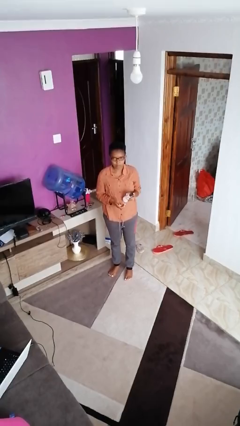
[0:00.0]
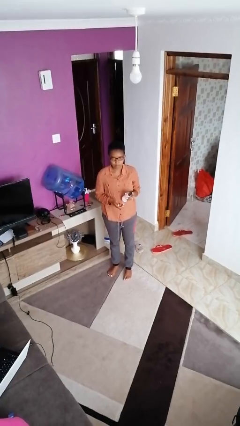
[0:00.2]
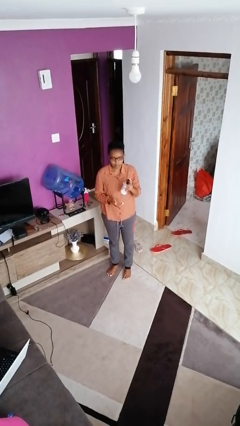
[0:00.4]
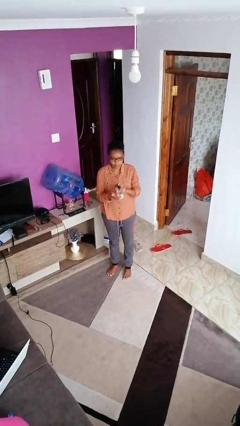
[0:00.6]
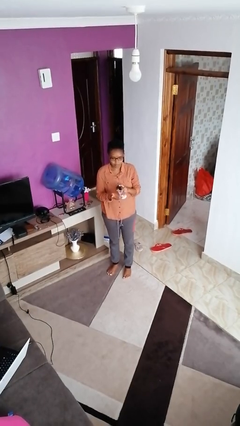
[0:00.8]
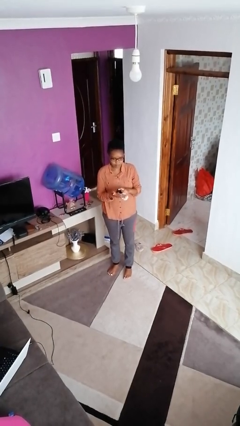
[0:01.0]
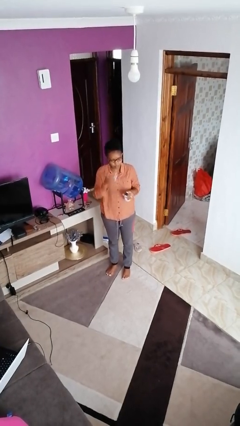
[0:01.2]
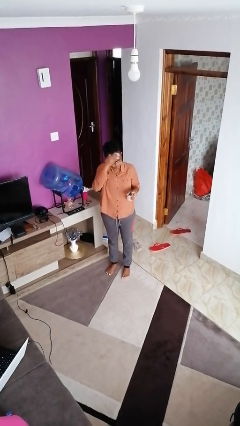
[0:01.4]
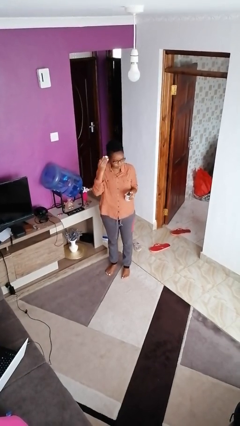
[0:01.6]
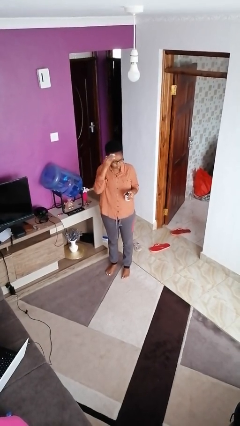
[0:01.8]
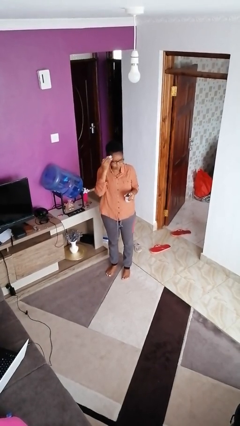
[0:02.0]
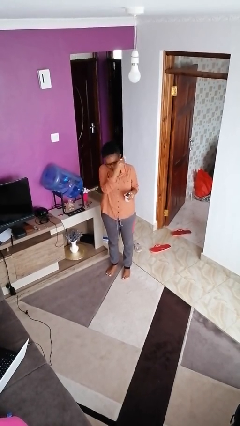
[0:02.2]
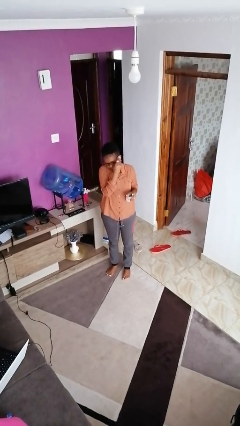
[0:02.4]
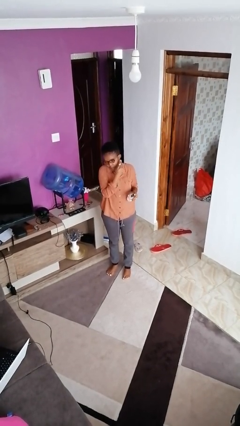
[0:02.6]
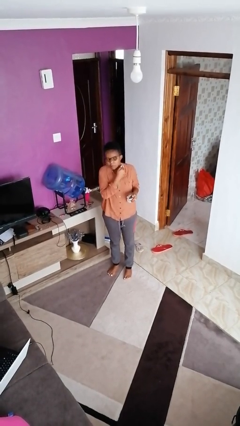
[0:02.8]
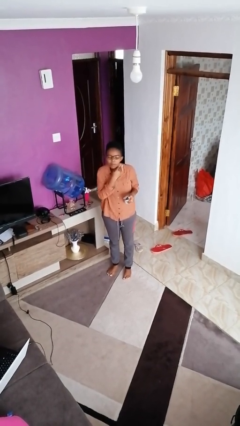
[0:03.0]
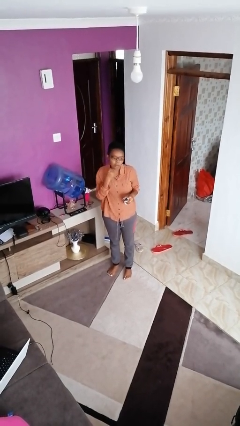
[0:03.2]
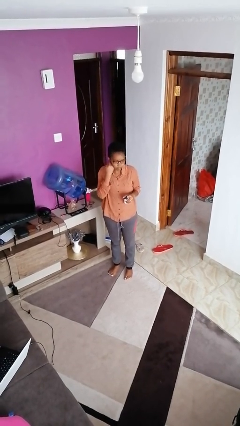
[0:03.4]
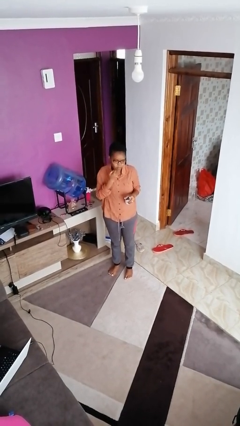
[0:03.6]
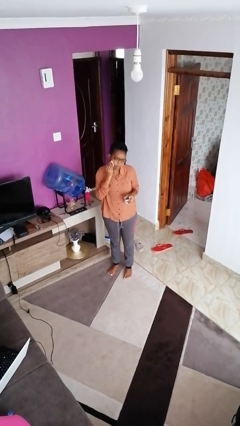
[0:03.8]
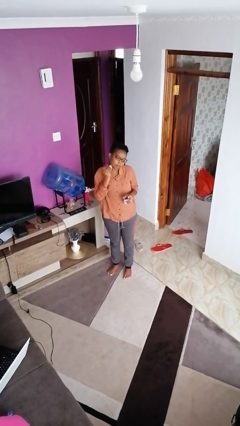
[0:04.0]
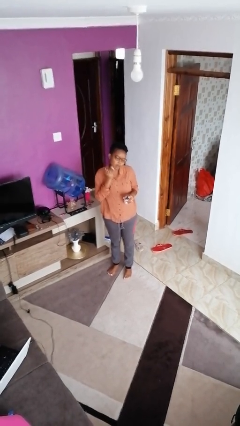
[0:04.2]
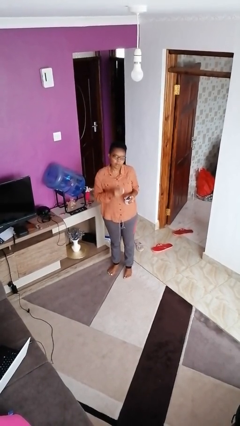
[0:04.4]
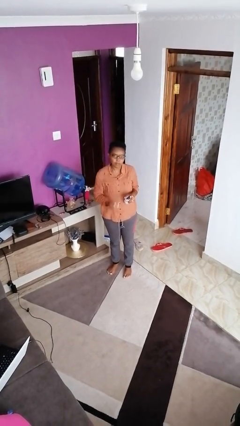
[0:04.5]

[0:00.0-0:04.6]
person applies facial moisturizer

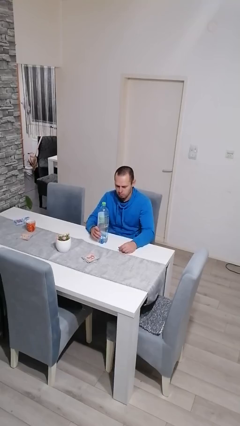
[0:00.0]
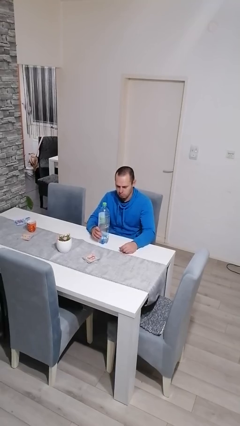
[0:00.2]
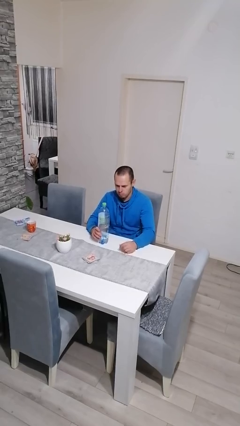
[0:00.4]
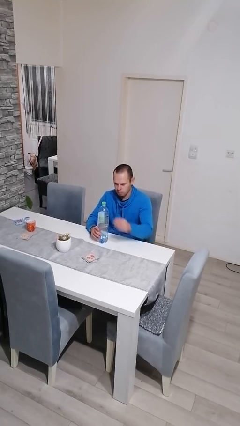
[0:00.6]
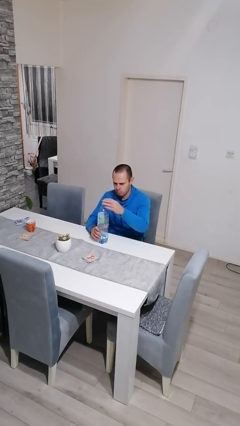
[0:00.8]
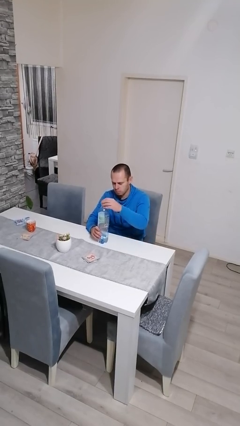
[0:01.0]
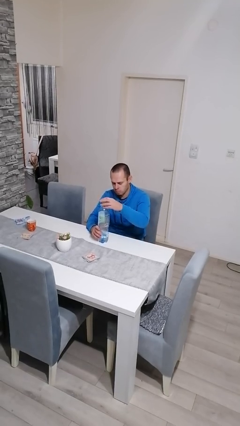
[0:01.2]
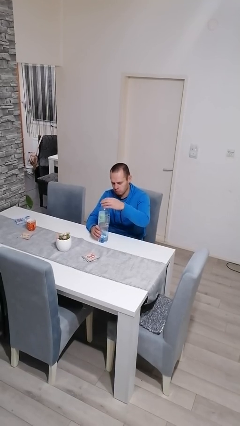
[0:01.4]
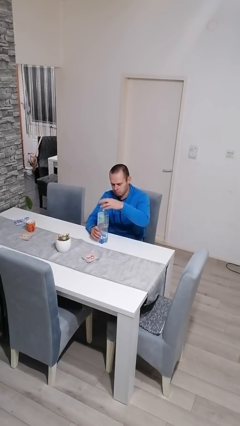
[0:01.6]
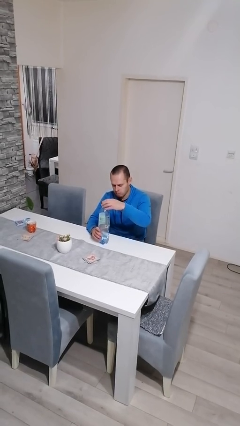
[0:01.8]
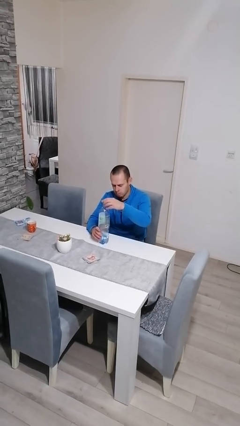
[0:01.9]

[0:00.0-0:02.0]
person unscrews lid from bottle

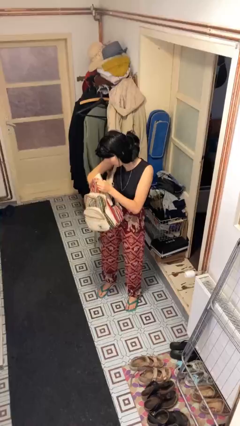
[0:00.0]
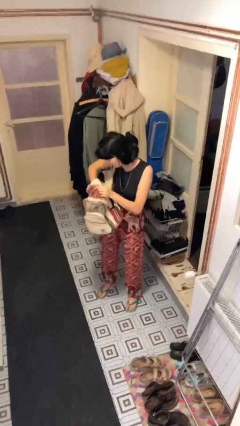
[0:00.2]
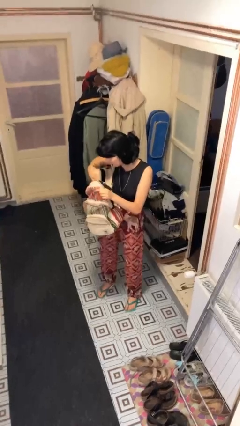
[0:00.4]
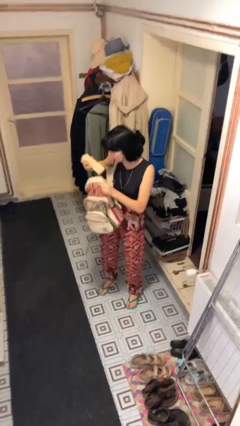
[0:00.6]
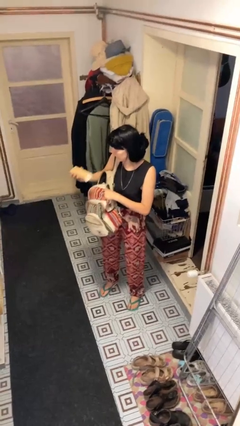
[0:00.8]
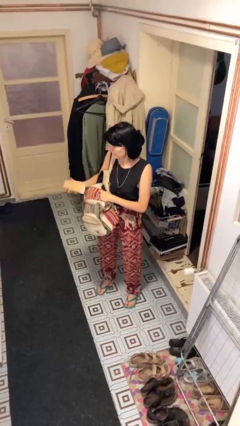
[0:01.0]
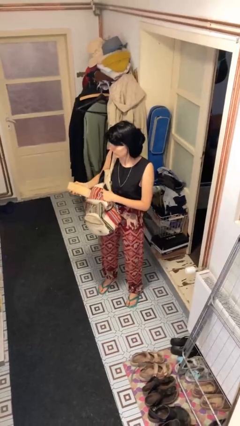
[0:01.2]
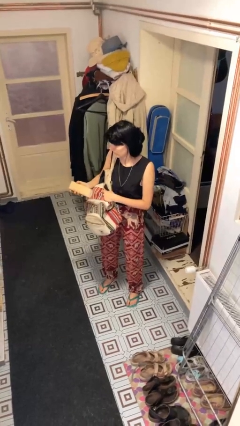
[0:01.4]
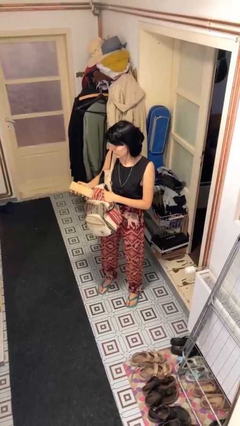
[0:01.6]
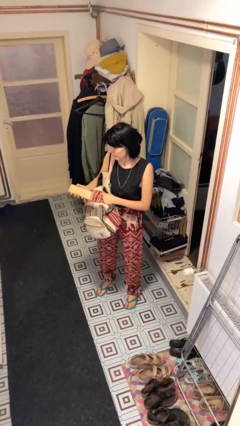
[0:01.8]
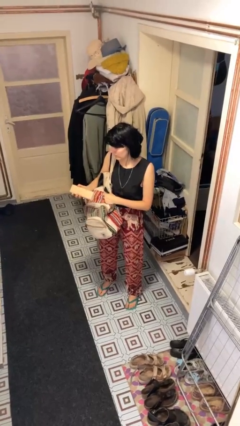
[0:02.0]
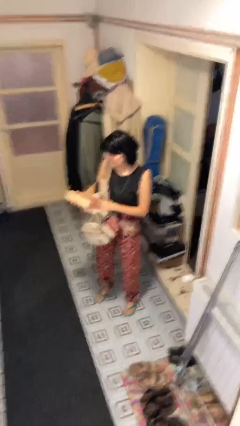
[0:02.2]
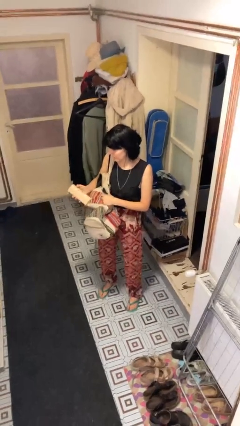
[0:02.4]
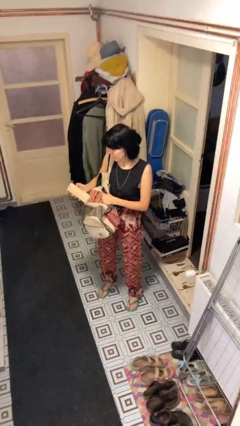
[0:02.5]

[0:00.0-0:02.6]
person takes object from backpack

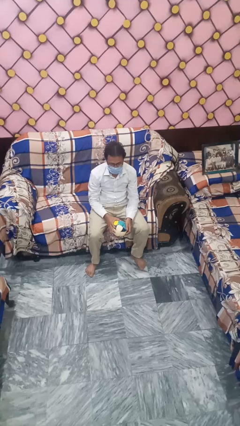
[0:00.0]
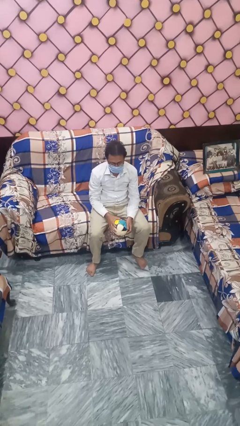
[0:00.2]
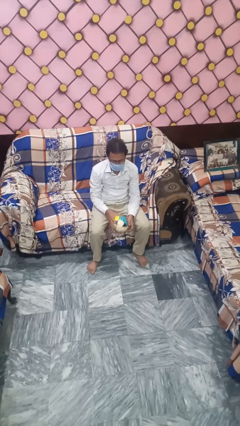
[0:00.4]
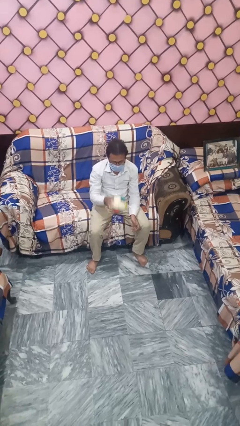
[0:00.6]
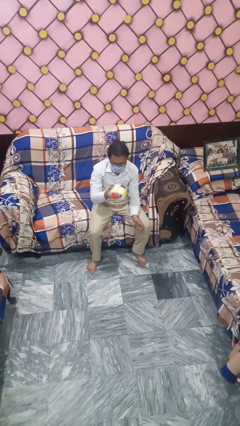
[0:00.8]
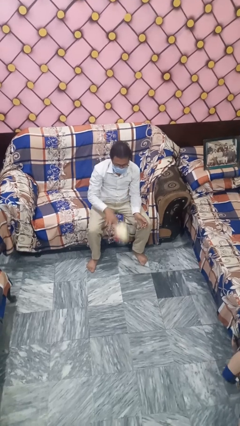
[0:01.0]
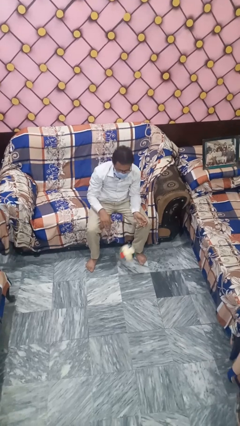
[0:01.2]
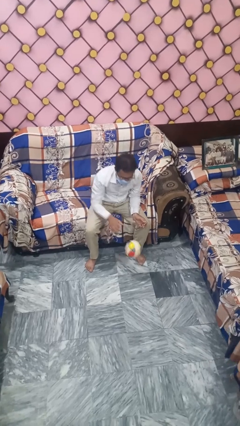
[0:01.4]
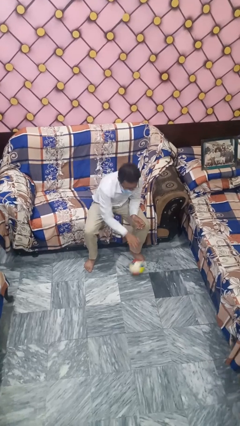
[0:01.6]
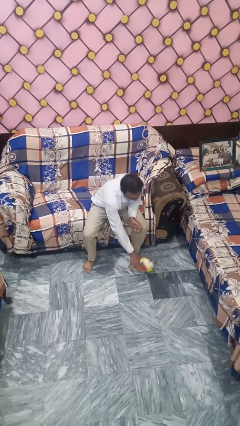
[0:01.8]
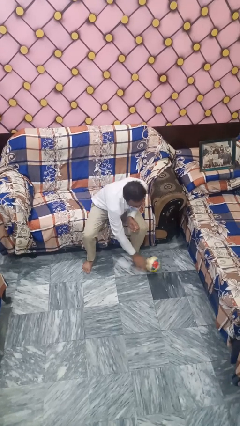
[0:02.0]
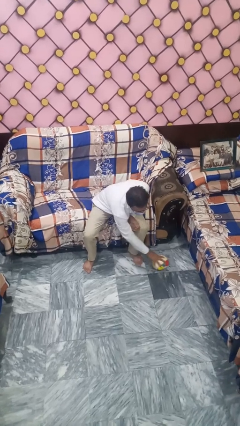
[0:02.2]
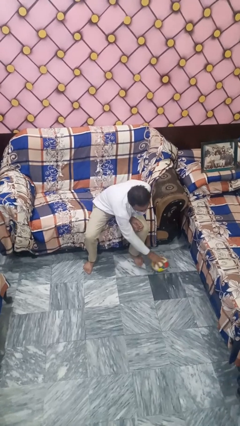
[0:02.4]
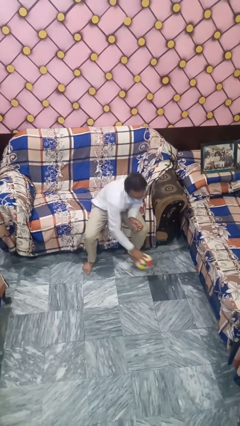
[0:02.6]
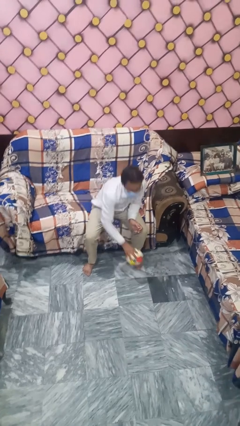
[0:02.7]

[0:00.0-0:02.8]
person bounces ball on floor

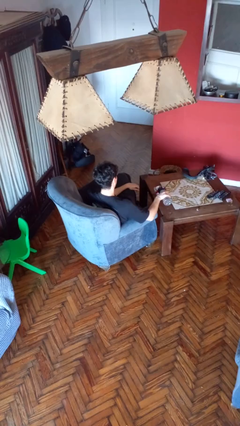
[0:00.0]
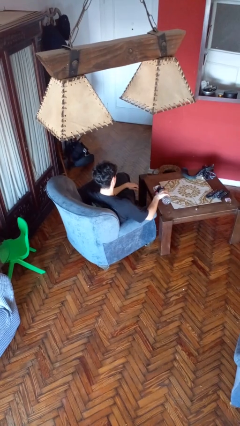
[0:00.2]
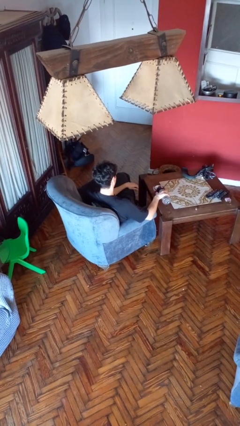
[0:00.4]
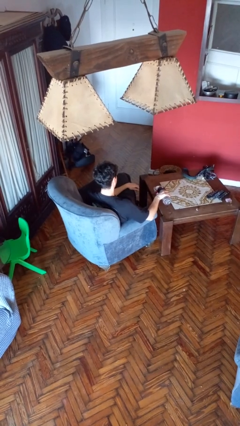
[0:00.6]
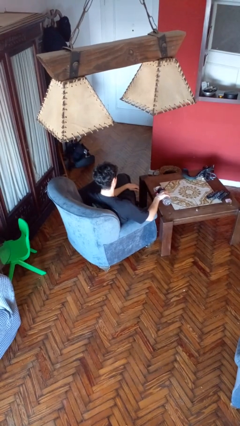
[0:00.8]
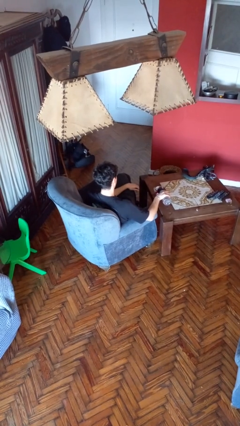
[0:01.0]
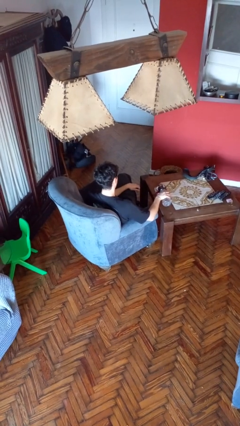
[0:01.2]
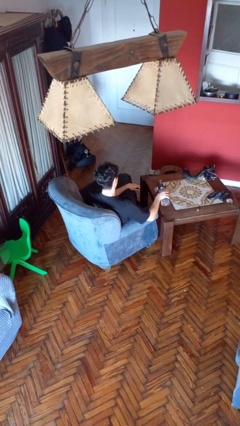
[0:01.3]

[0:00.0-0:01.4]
person pours liquid into cup

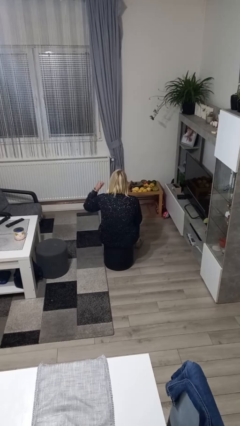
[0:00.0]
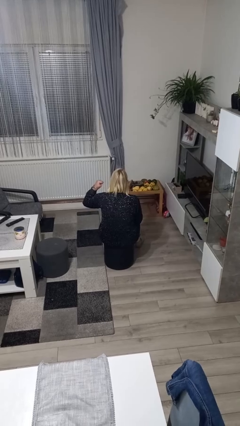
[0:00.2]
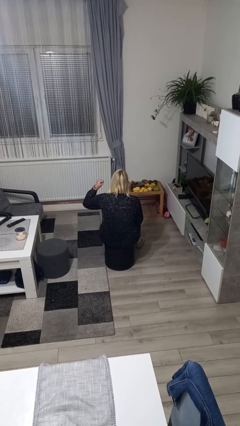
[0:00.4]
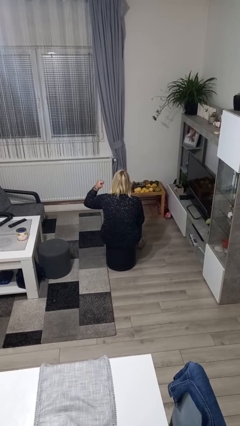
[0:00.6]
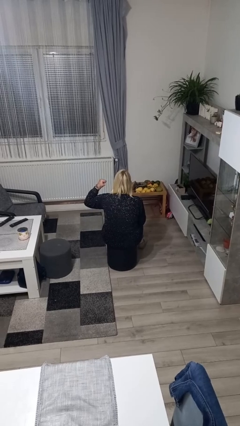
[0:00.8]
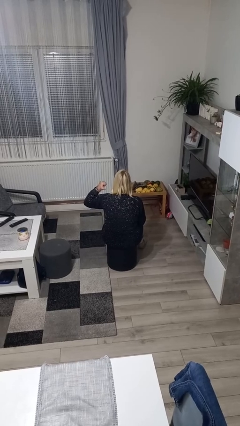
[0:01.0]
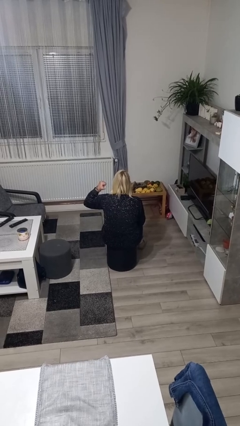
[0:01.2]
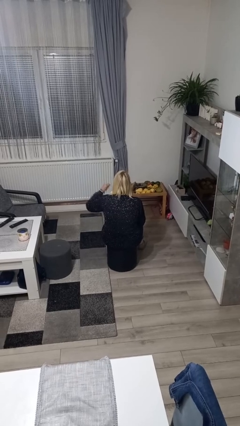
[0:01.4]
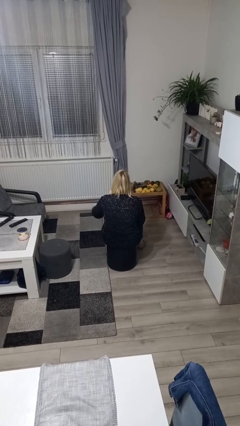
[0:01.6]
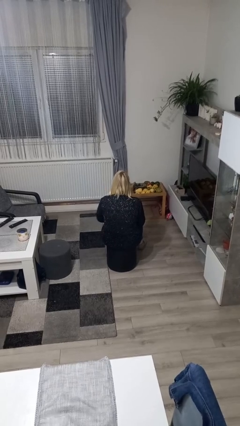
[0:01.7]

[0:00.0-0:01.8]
person gestures behind me

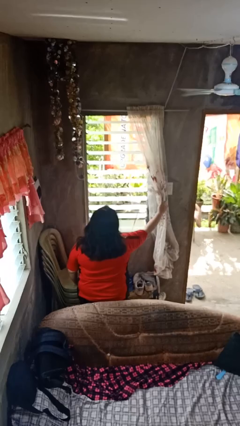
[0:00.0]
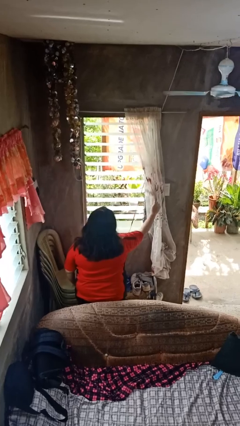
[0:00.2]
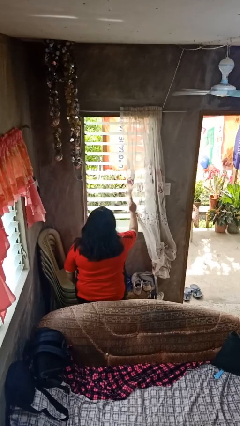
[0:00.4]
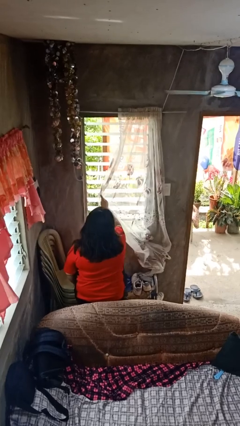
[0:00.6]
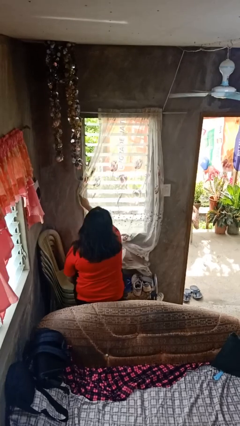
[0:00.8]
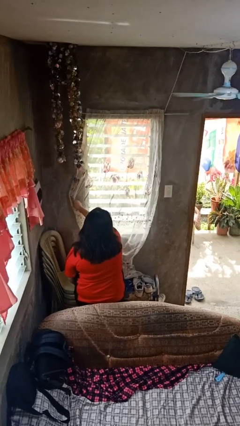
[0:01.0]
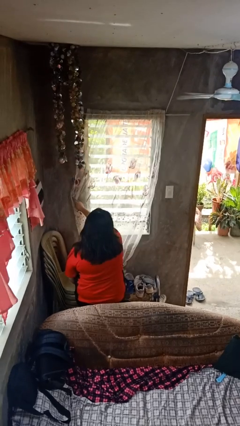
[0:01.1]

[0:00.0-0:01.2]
person closes curtains

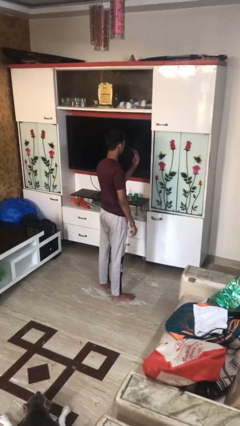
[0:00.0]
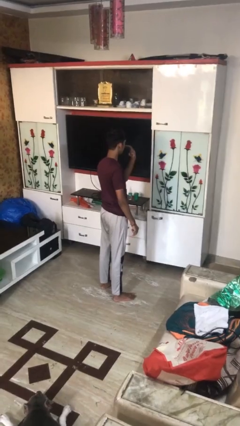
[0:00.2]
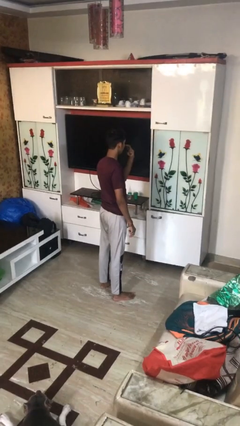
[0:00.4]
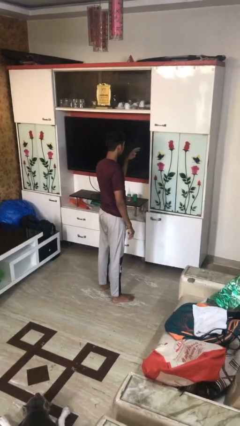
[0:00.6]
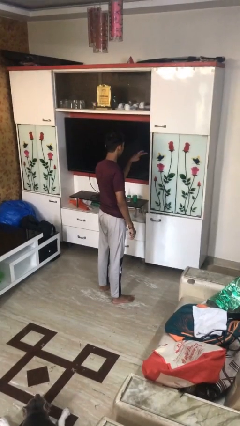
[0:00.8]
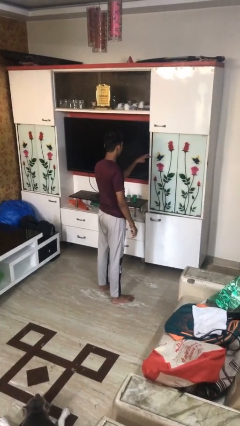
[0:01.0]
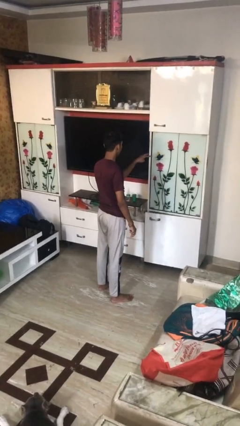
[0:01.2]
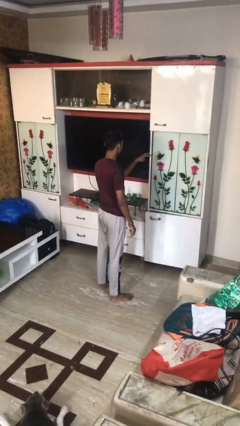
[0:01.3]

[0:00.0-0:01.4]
person gestures watch closely
